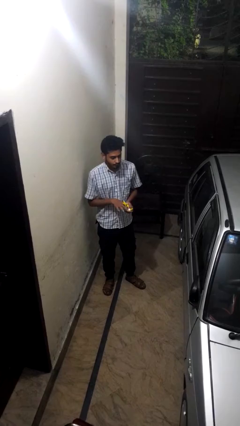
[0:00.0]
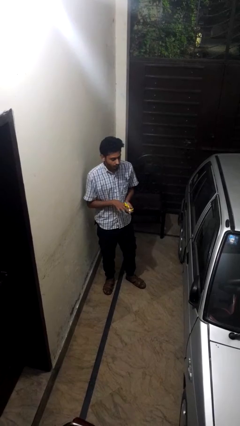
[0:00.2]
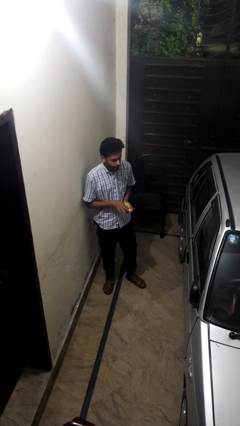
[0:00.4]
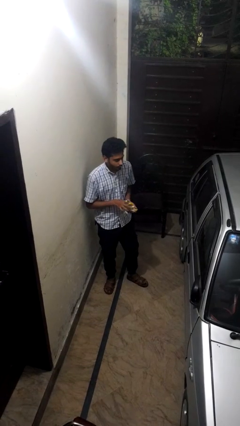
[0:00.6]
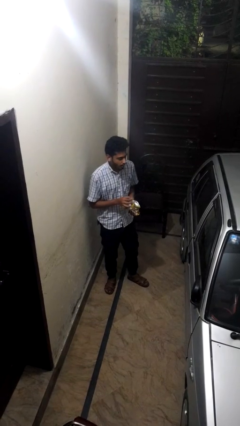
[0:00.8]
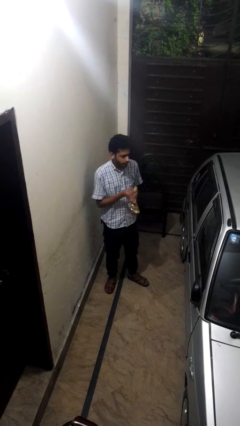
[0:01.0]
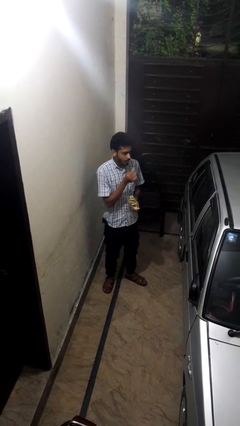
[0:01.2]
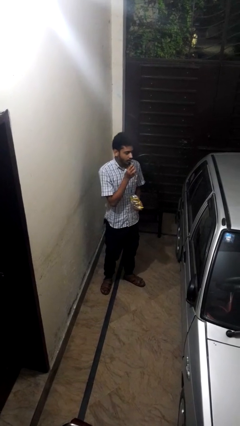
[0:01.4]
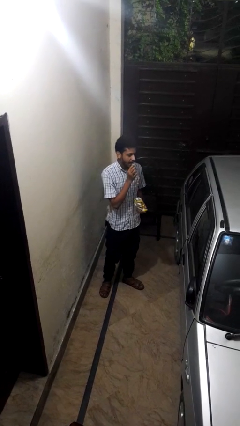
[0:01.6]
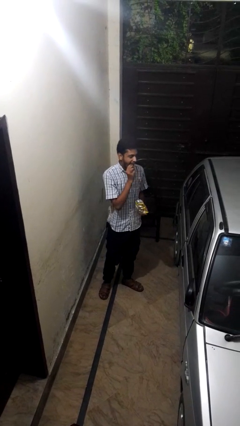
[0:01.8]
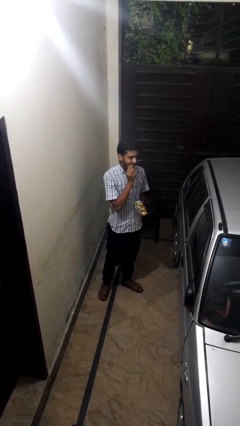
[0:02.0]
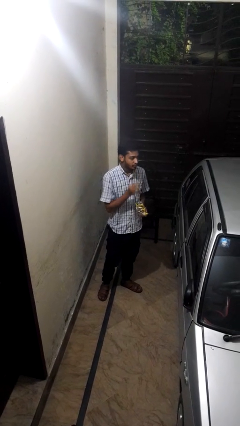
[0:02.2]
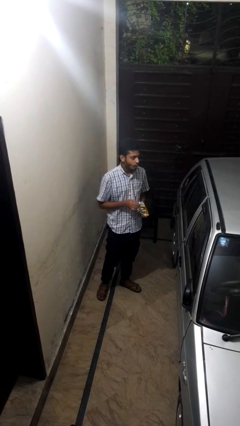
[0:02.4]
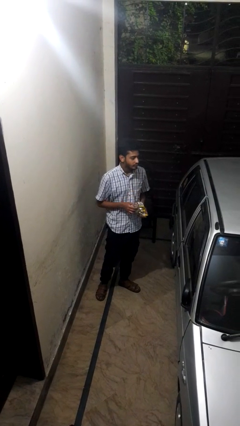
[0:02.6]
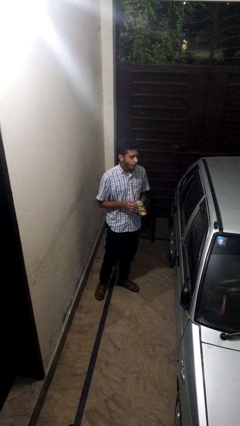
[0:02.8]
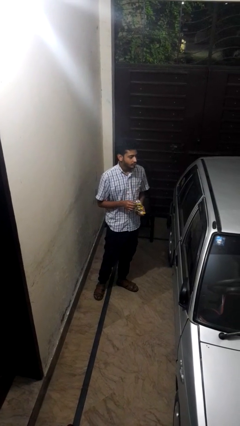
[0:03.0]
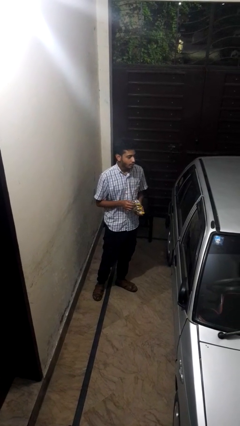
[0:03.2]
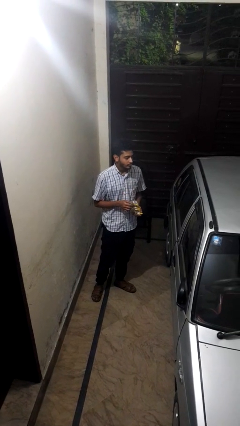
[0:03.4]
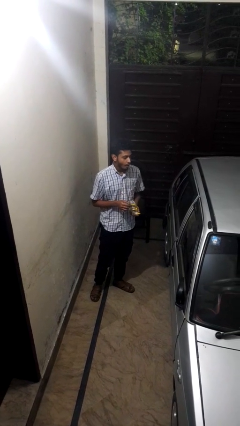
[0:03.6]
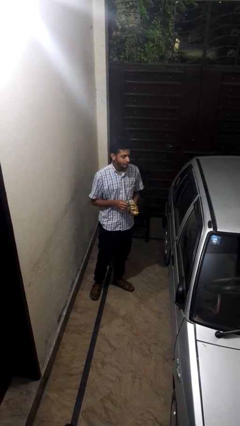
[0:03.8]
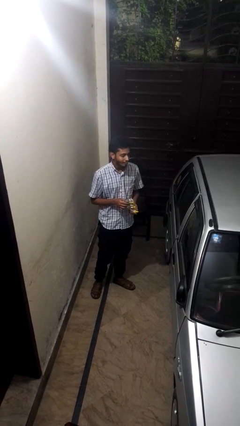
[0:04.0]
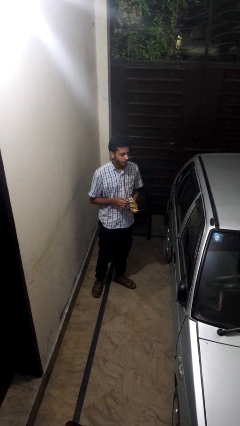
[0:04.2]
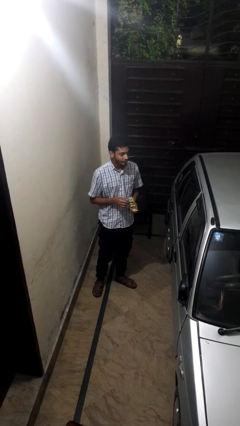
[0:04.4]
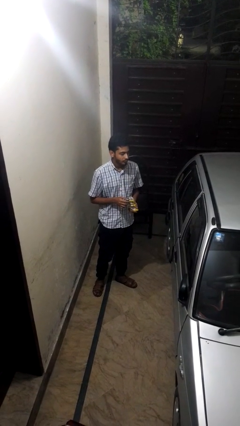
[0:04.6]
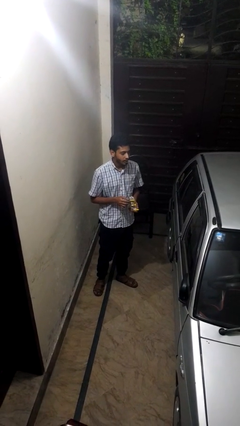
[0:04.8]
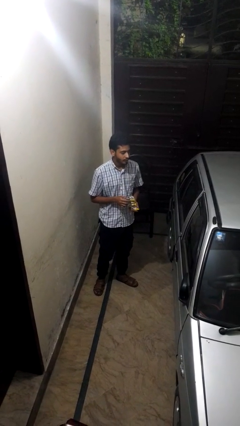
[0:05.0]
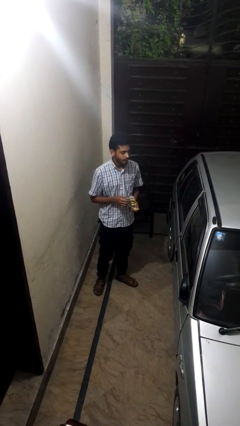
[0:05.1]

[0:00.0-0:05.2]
person eats snack from bag

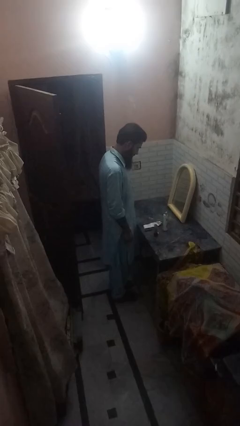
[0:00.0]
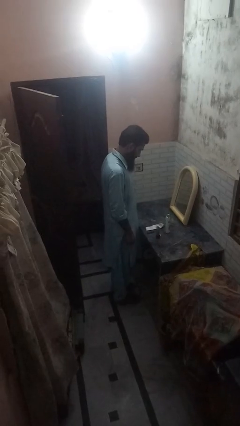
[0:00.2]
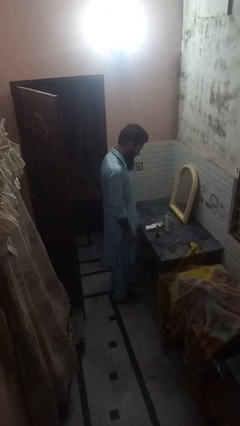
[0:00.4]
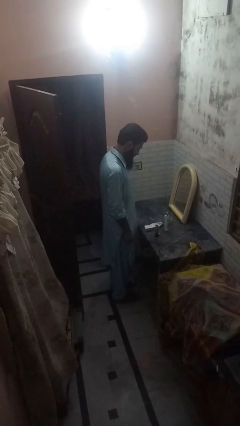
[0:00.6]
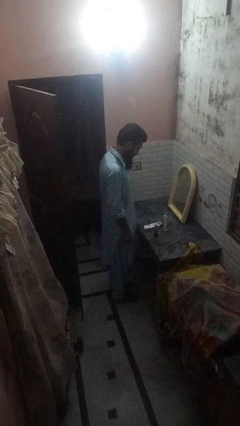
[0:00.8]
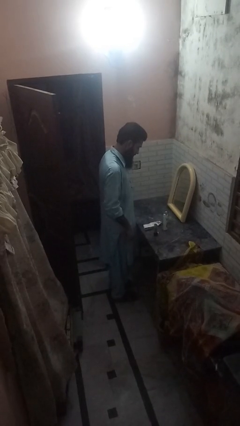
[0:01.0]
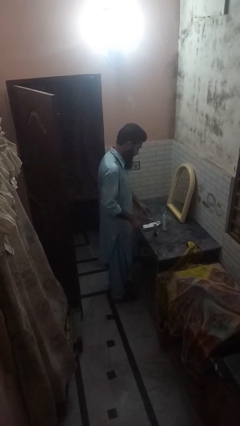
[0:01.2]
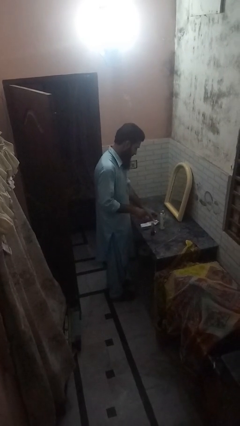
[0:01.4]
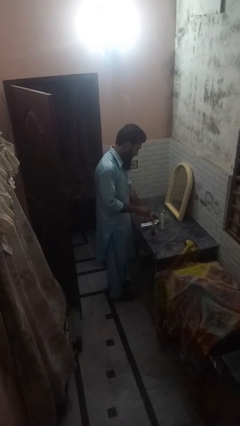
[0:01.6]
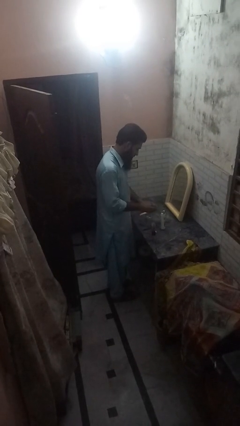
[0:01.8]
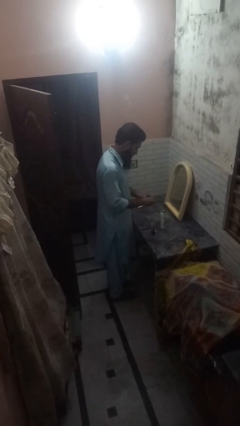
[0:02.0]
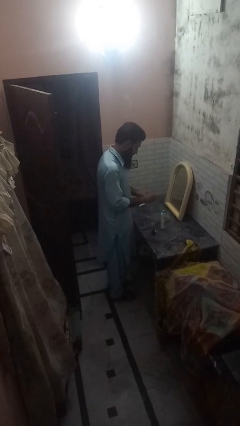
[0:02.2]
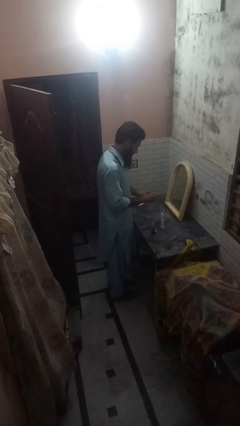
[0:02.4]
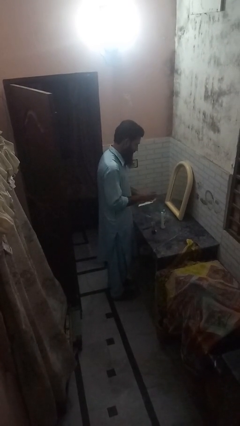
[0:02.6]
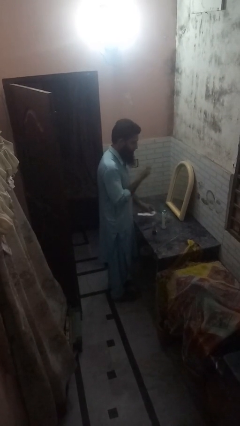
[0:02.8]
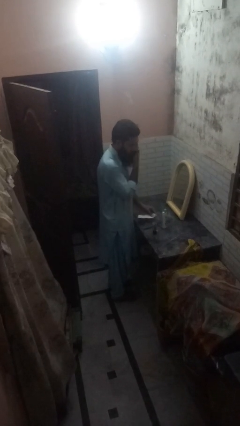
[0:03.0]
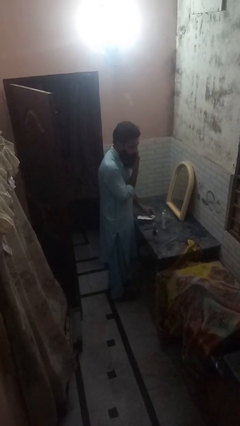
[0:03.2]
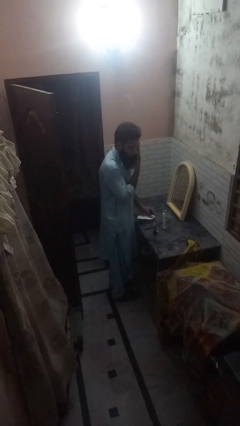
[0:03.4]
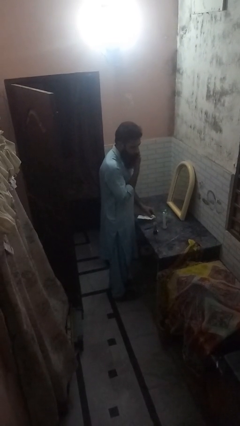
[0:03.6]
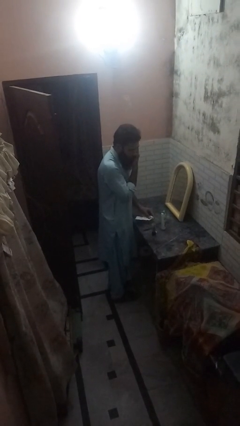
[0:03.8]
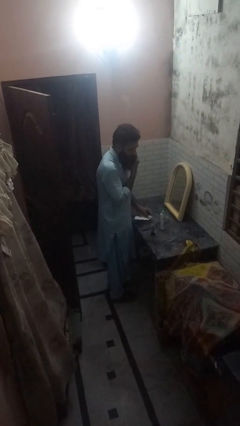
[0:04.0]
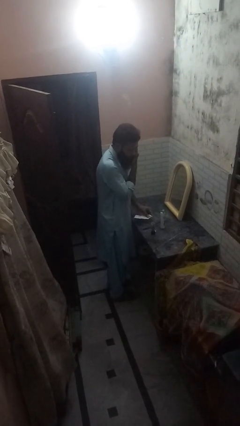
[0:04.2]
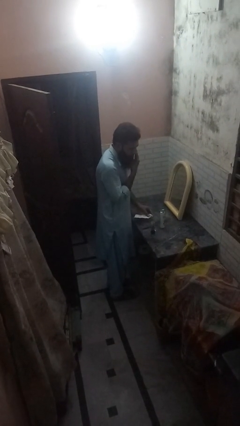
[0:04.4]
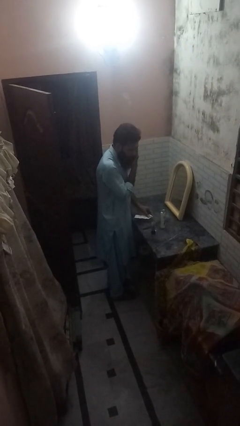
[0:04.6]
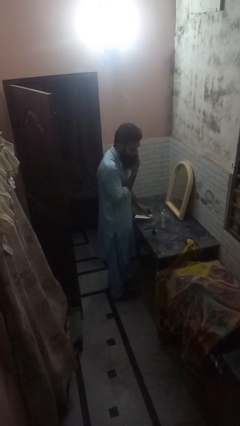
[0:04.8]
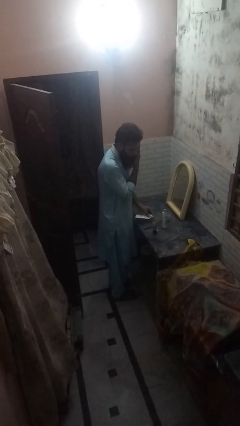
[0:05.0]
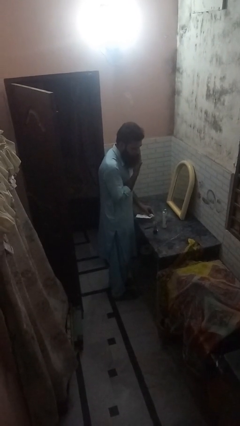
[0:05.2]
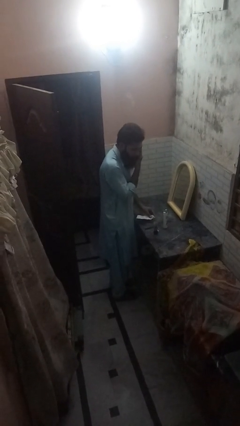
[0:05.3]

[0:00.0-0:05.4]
person applies shaving cream

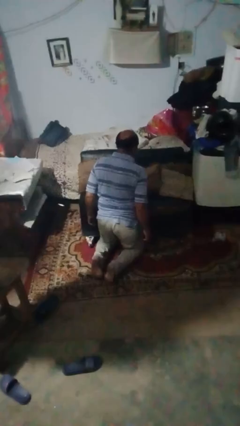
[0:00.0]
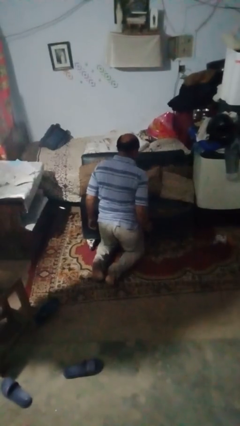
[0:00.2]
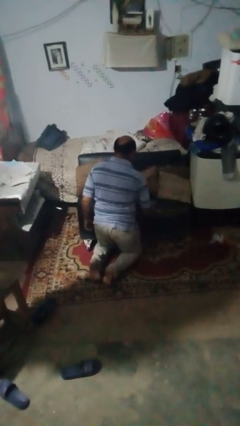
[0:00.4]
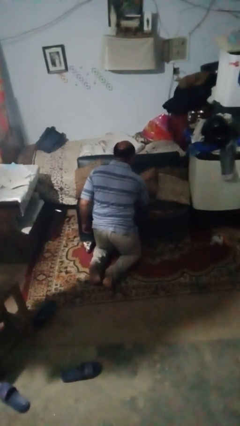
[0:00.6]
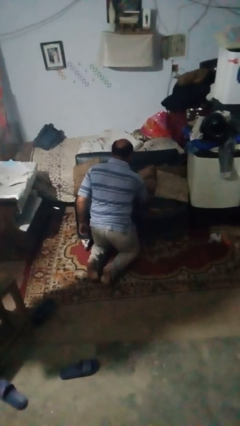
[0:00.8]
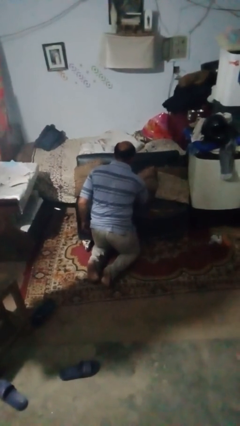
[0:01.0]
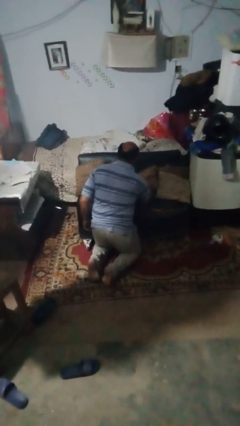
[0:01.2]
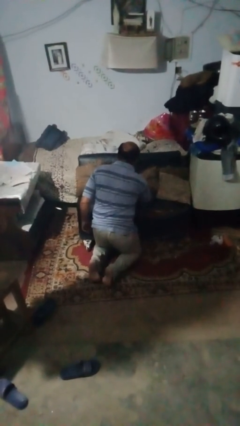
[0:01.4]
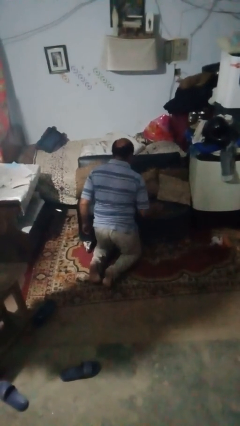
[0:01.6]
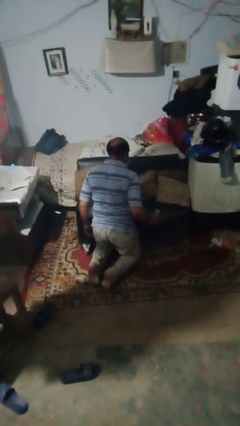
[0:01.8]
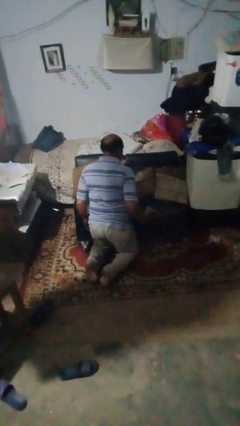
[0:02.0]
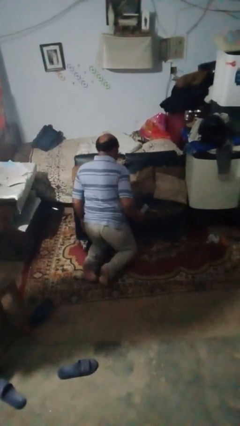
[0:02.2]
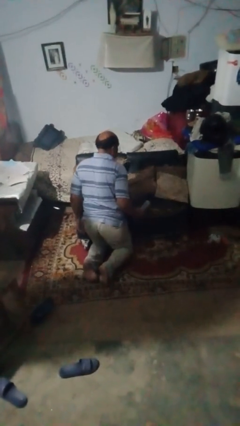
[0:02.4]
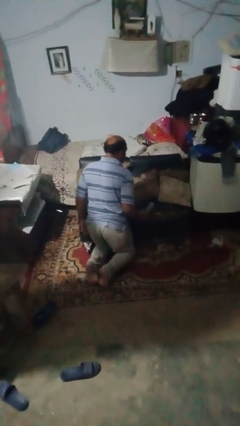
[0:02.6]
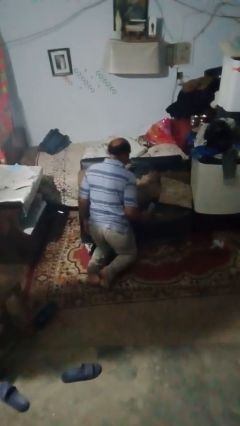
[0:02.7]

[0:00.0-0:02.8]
person searches in couch

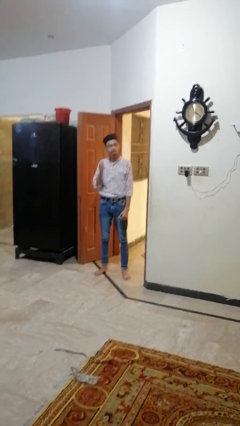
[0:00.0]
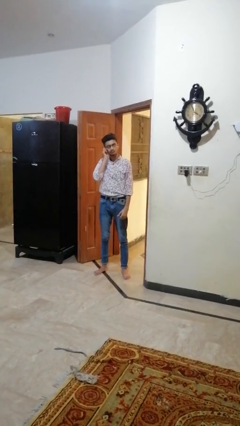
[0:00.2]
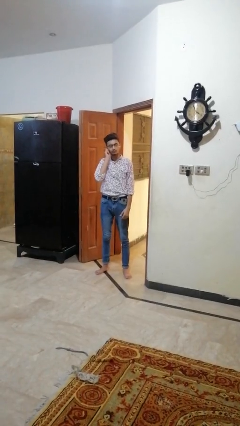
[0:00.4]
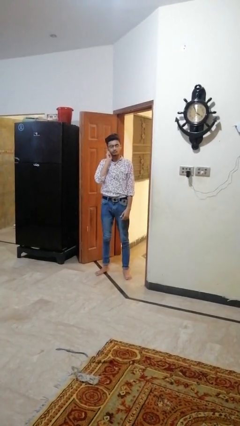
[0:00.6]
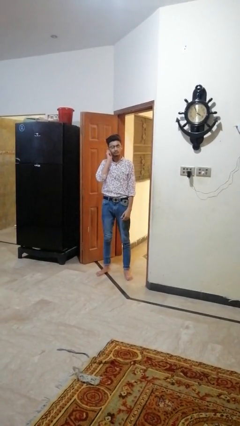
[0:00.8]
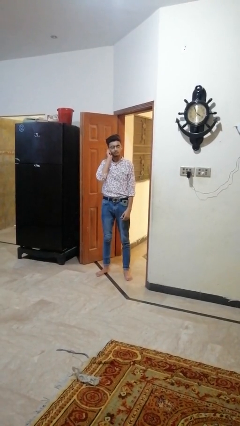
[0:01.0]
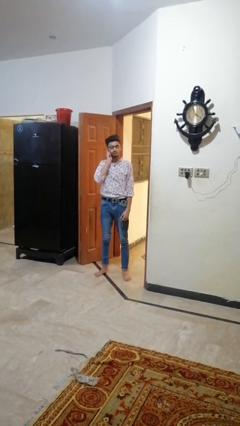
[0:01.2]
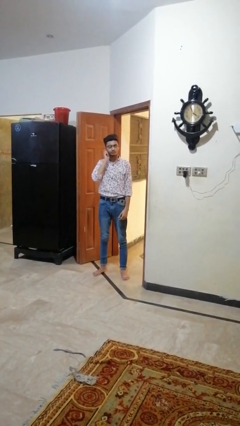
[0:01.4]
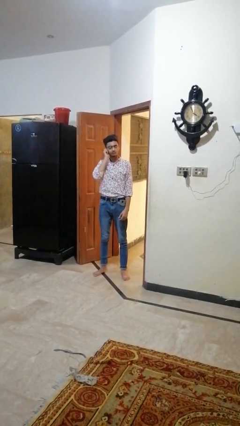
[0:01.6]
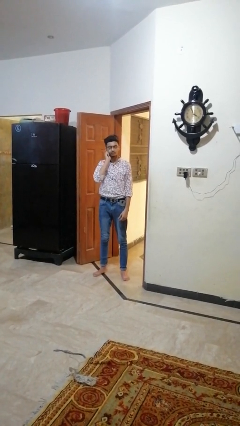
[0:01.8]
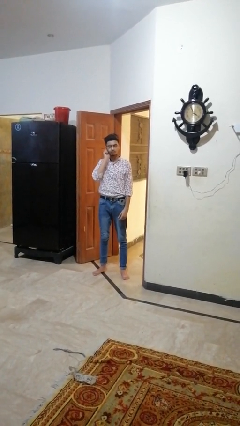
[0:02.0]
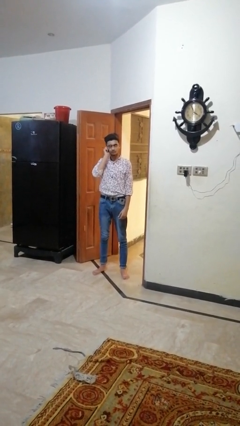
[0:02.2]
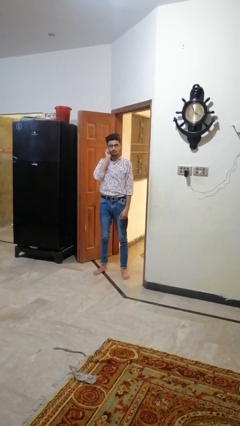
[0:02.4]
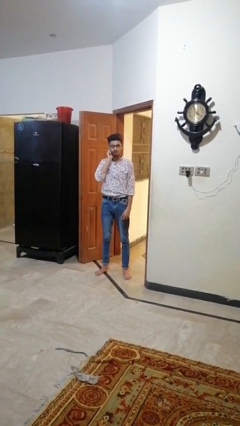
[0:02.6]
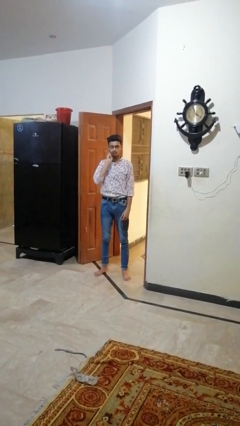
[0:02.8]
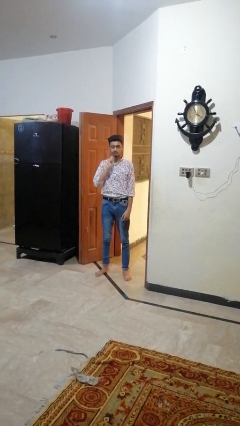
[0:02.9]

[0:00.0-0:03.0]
person touches earlobe

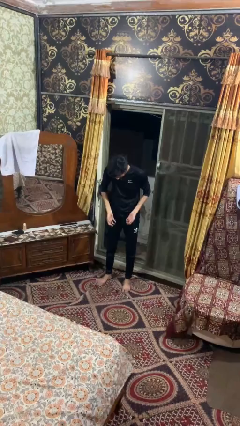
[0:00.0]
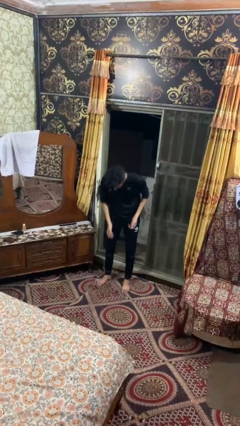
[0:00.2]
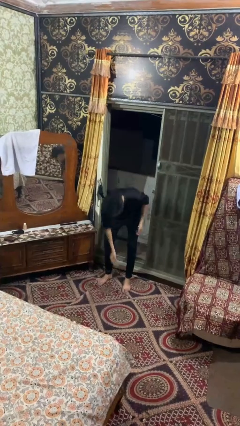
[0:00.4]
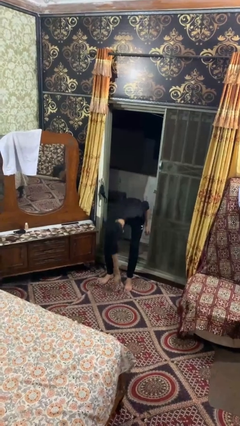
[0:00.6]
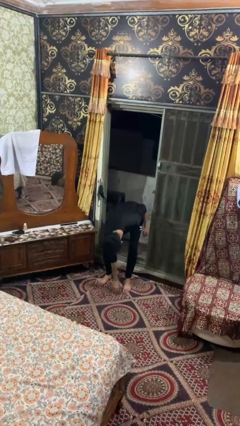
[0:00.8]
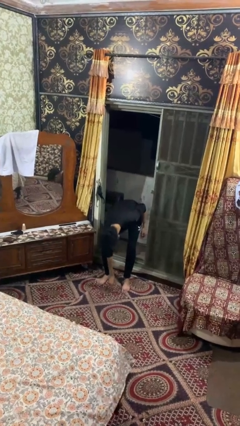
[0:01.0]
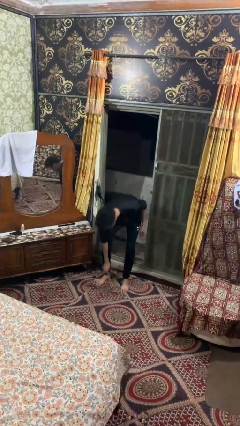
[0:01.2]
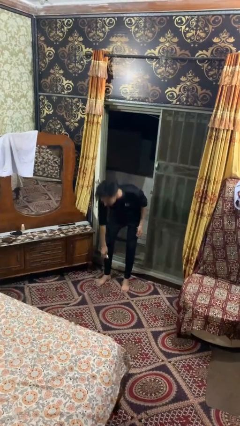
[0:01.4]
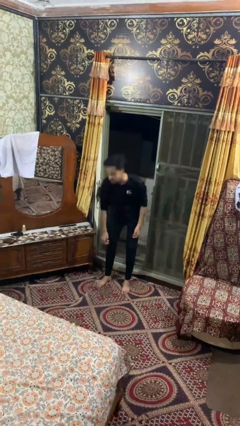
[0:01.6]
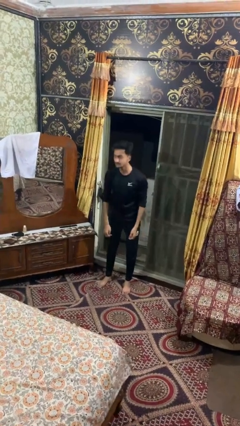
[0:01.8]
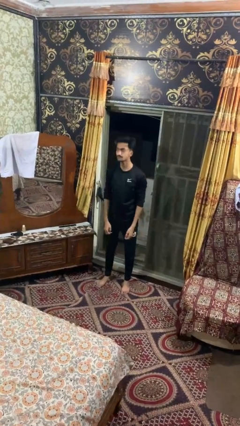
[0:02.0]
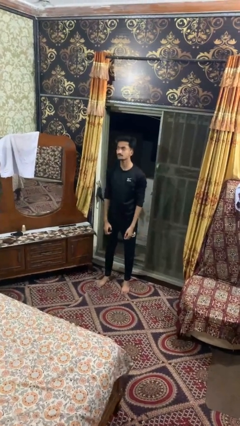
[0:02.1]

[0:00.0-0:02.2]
person picks up object from floor
